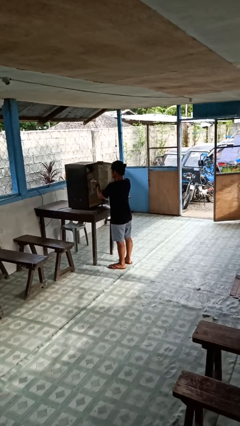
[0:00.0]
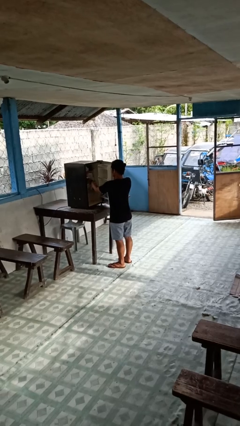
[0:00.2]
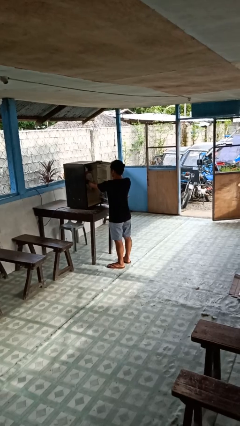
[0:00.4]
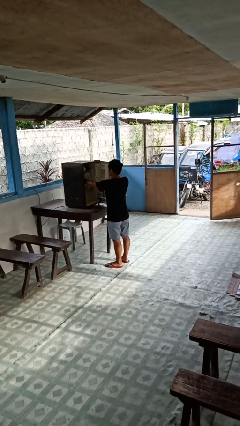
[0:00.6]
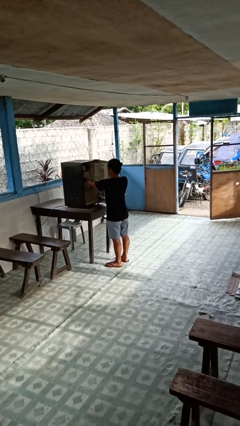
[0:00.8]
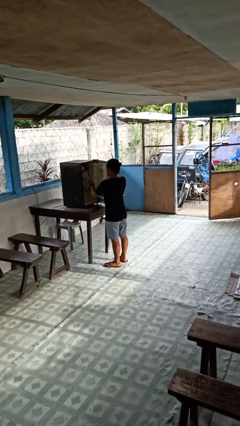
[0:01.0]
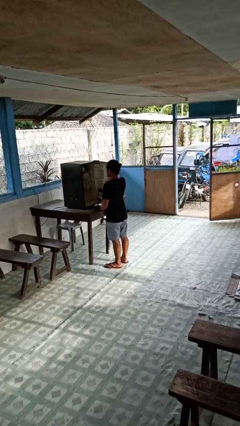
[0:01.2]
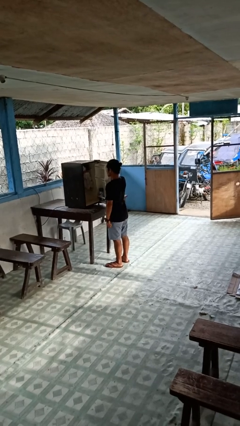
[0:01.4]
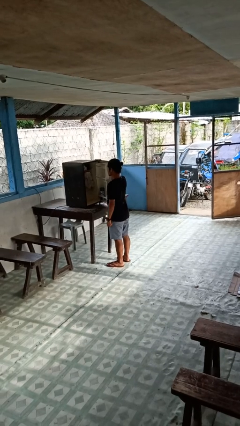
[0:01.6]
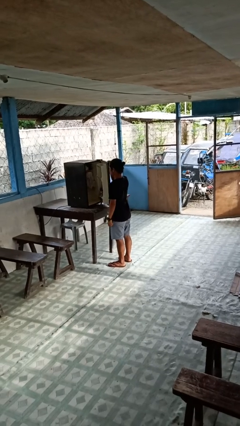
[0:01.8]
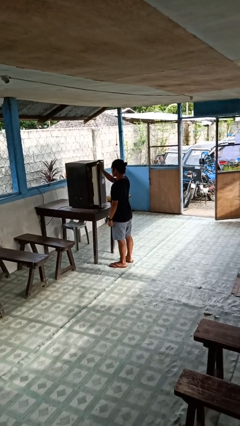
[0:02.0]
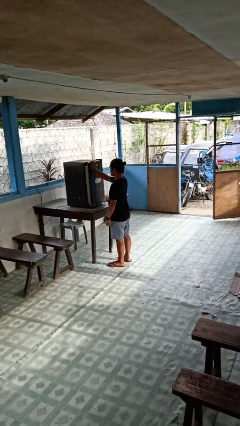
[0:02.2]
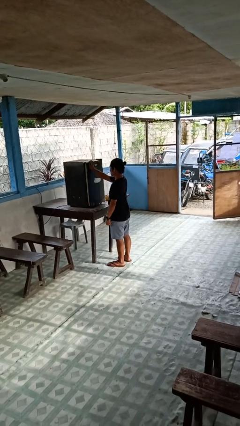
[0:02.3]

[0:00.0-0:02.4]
person puts object into refrigerator

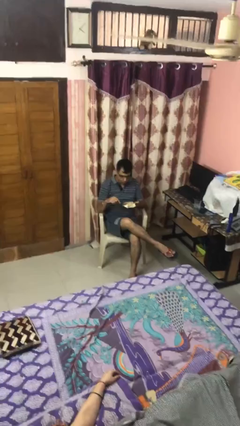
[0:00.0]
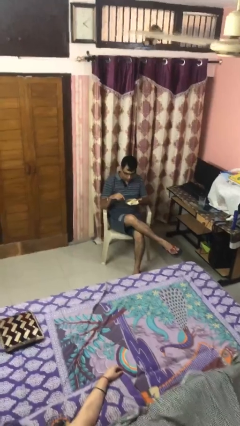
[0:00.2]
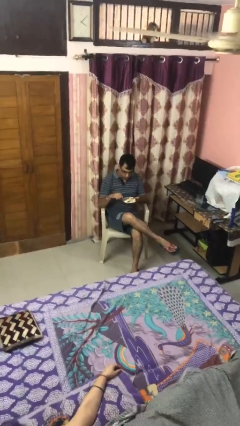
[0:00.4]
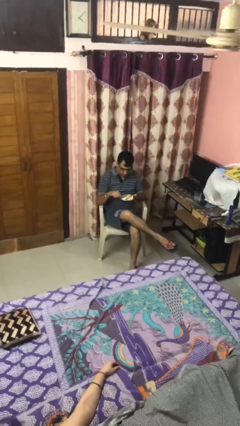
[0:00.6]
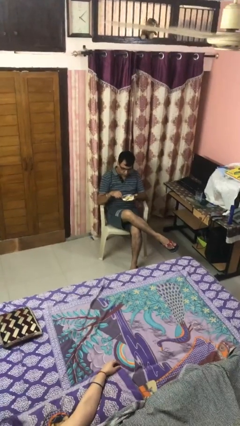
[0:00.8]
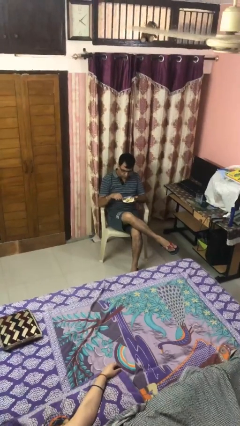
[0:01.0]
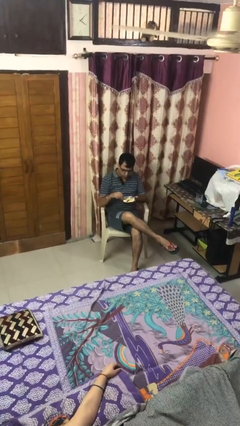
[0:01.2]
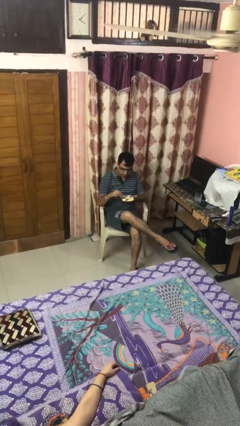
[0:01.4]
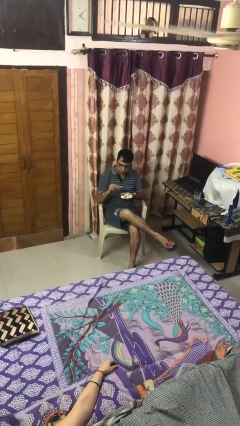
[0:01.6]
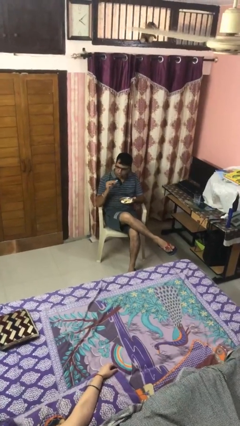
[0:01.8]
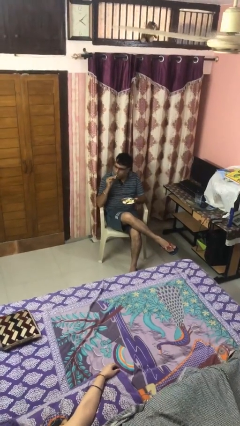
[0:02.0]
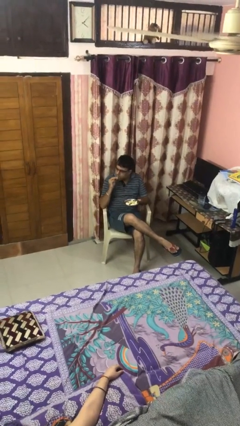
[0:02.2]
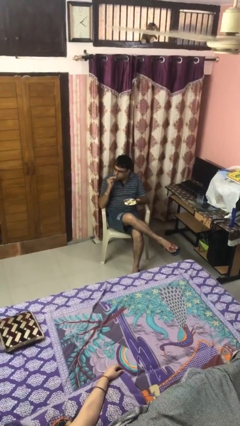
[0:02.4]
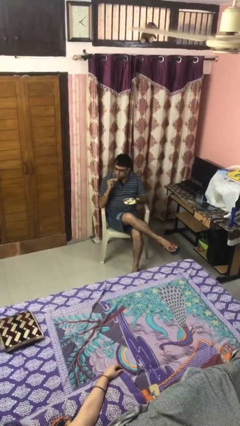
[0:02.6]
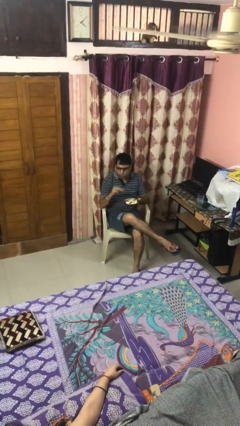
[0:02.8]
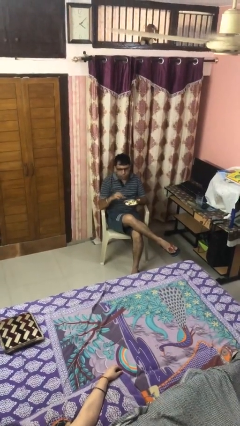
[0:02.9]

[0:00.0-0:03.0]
person eats with hands

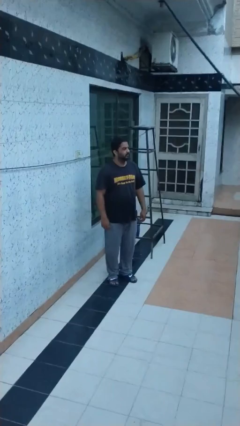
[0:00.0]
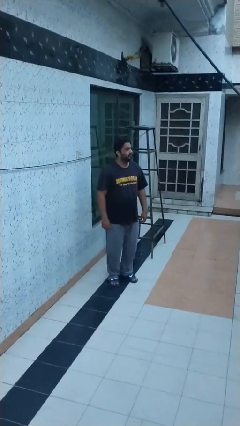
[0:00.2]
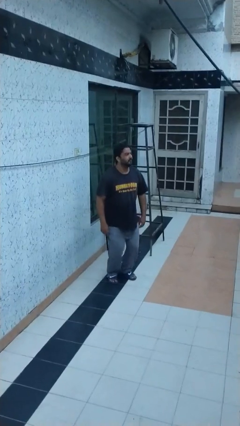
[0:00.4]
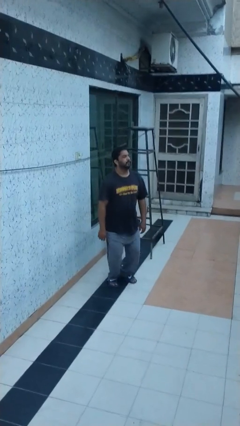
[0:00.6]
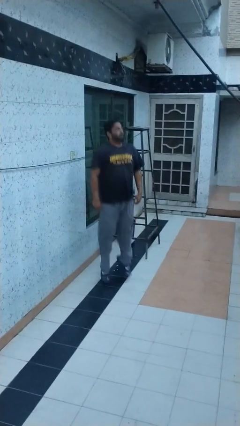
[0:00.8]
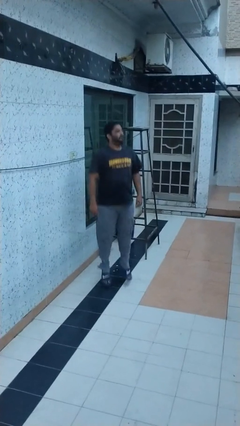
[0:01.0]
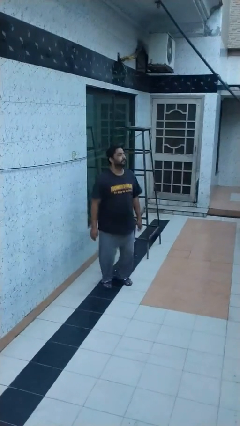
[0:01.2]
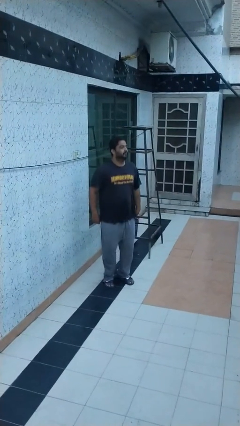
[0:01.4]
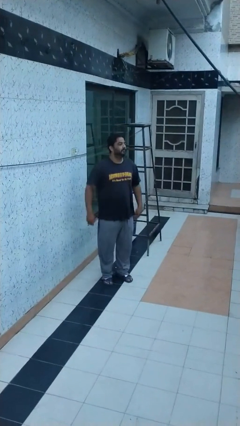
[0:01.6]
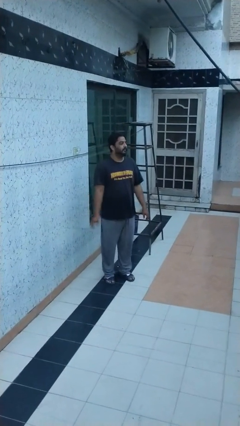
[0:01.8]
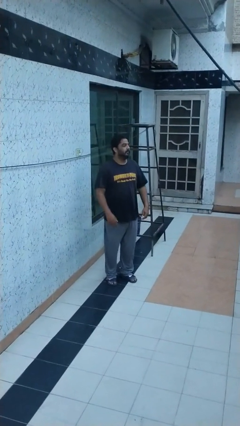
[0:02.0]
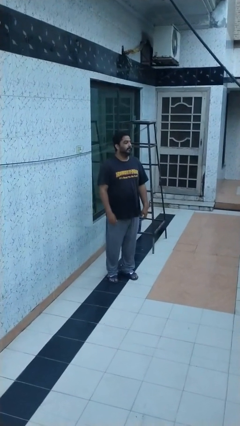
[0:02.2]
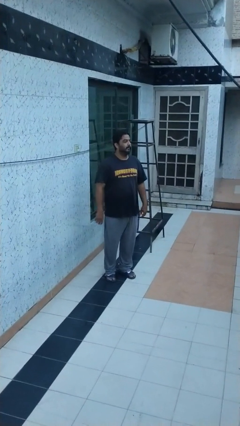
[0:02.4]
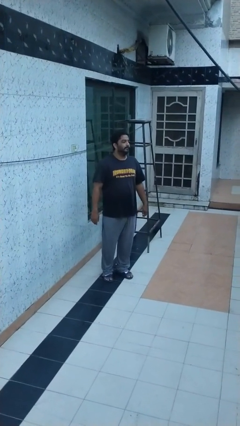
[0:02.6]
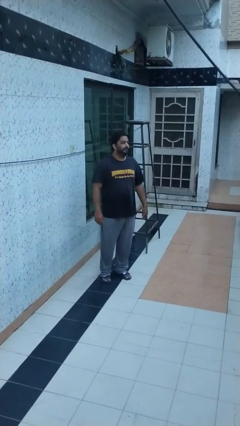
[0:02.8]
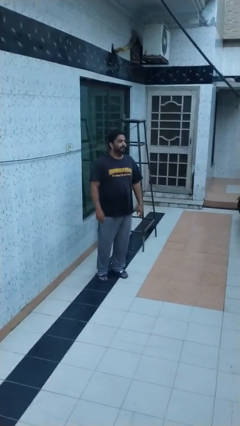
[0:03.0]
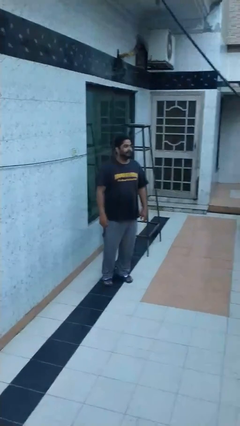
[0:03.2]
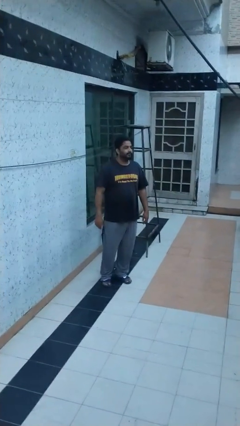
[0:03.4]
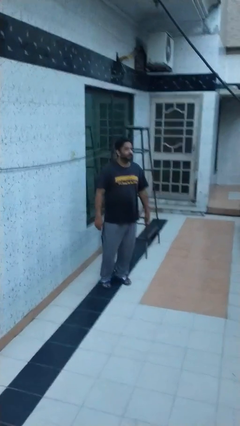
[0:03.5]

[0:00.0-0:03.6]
person jumps

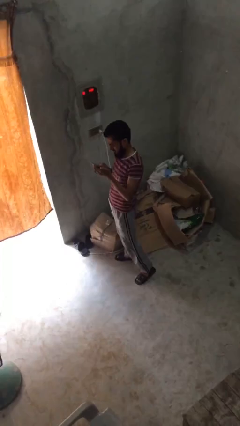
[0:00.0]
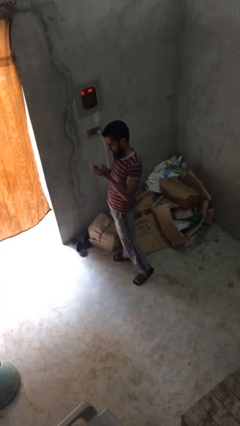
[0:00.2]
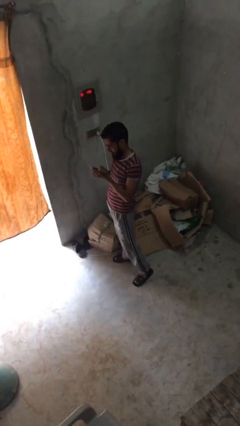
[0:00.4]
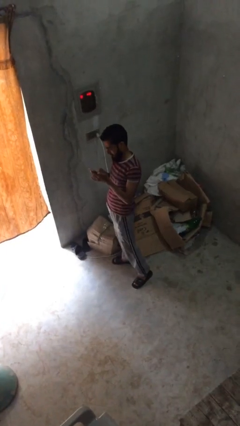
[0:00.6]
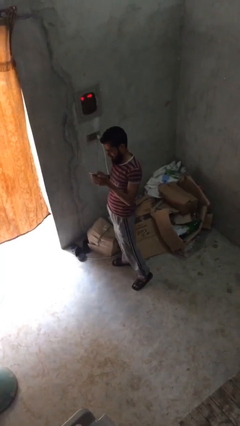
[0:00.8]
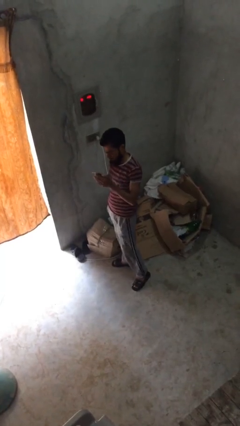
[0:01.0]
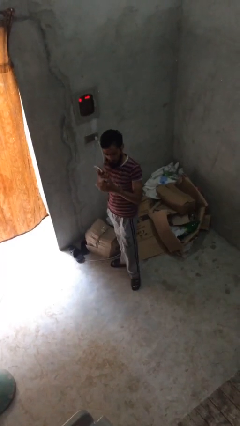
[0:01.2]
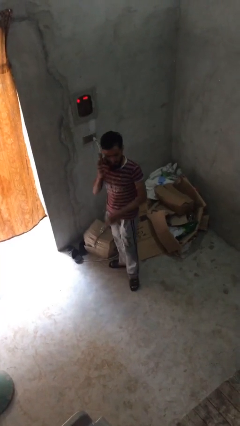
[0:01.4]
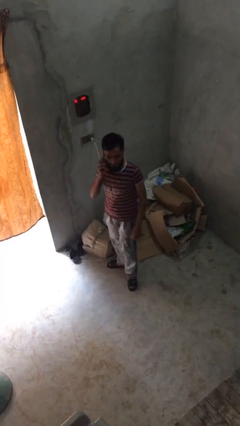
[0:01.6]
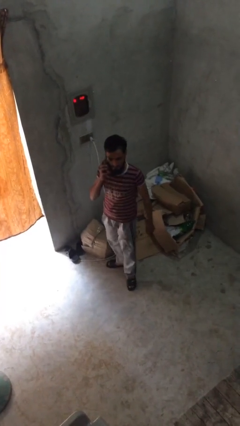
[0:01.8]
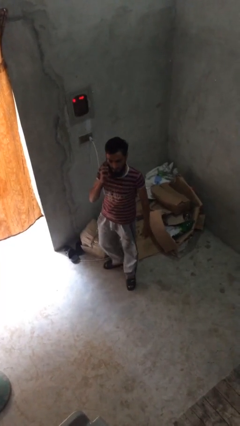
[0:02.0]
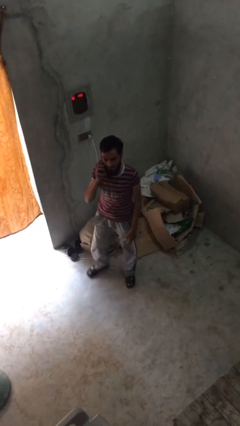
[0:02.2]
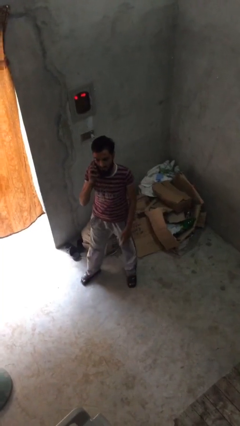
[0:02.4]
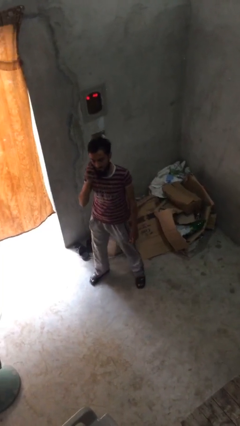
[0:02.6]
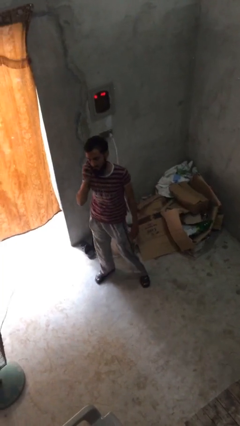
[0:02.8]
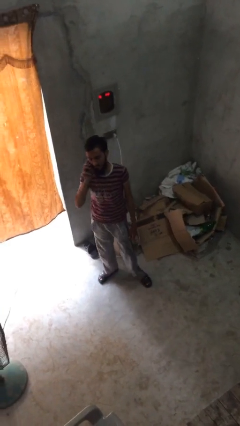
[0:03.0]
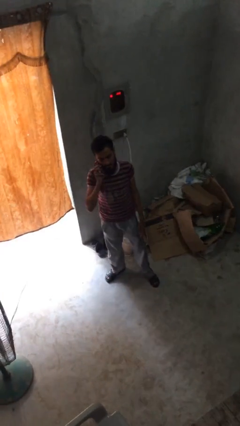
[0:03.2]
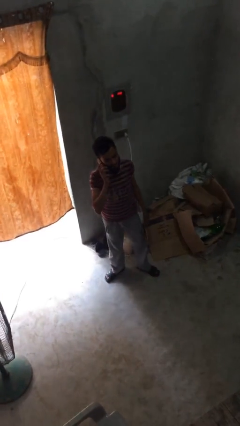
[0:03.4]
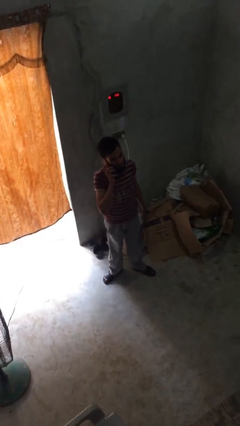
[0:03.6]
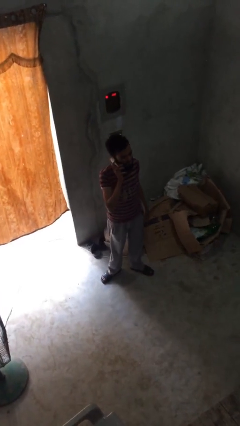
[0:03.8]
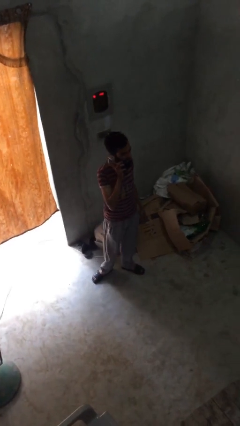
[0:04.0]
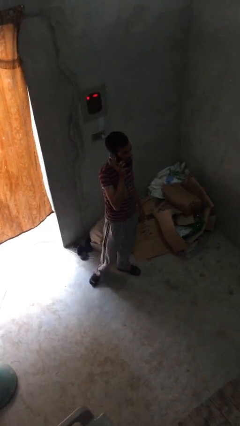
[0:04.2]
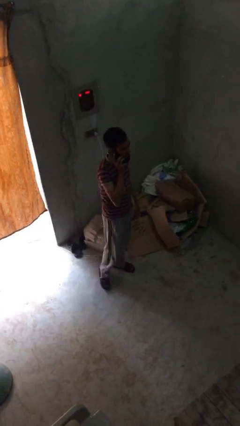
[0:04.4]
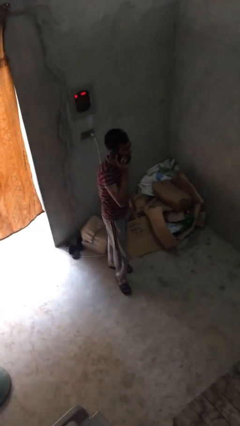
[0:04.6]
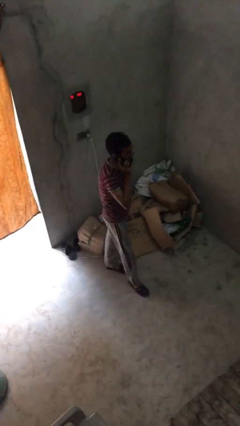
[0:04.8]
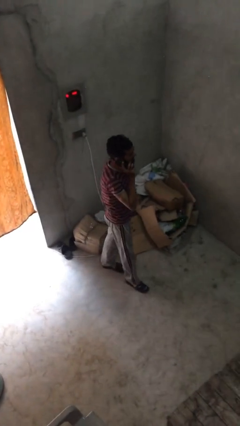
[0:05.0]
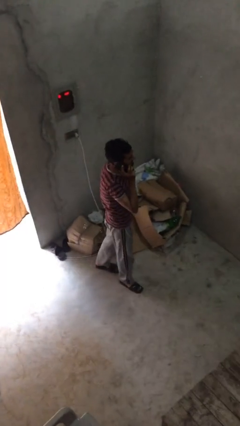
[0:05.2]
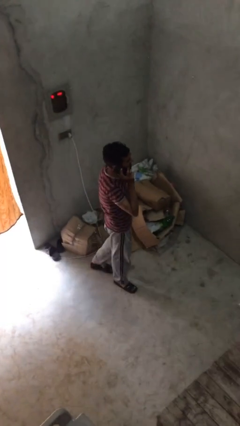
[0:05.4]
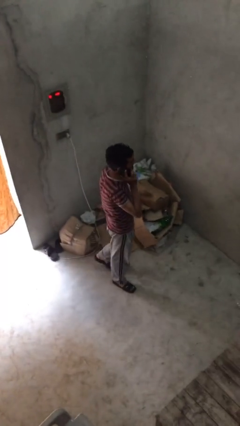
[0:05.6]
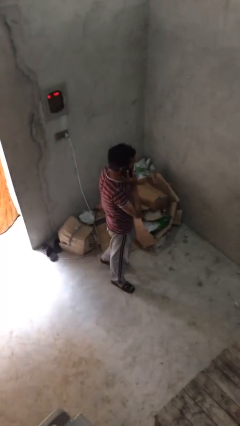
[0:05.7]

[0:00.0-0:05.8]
person talks on phone

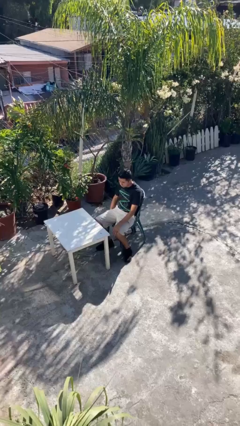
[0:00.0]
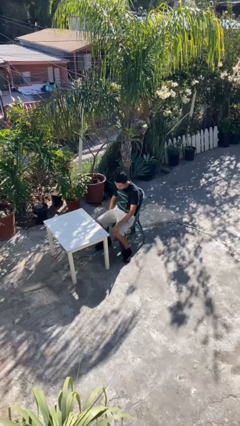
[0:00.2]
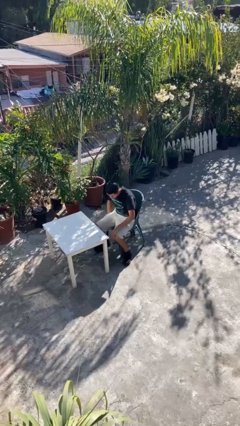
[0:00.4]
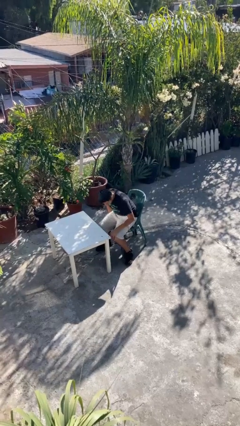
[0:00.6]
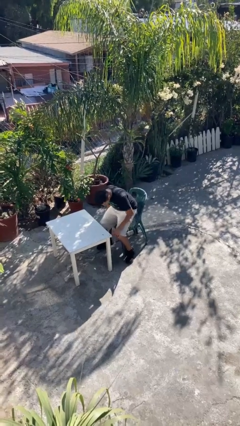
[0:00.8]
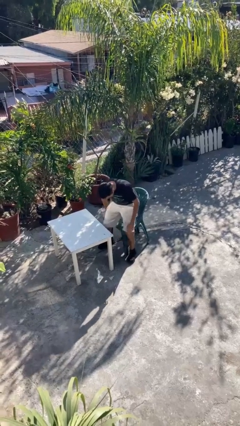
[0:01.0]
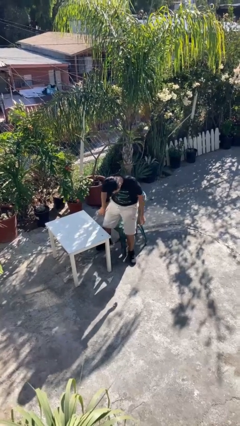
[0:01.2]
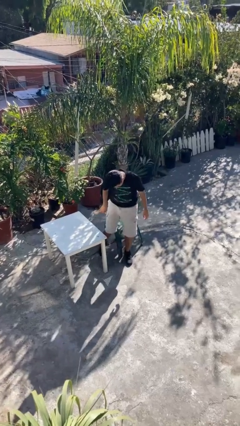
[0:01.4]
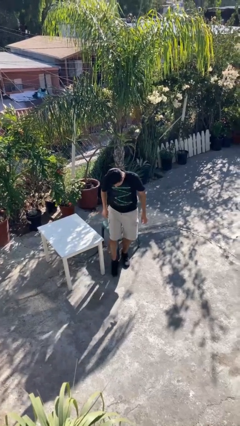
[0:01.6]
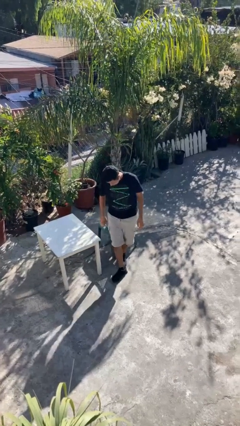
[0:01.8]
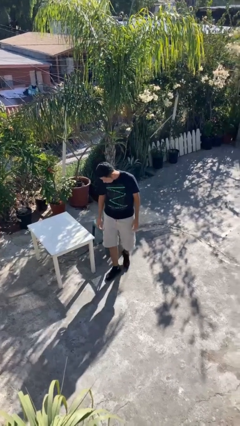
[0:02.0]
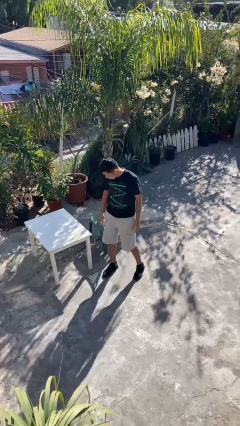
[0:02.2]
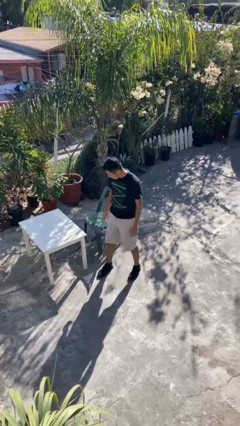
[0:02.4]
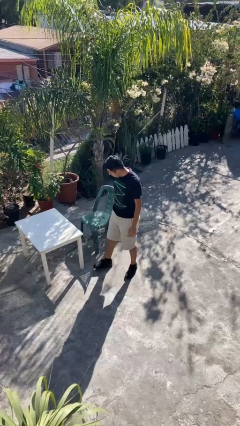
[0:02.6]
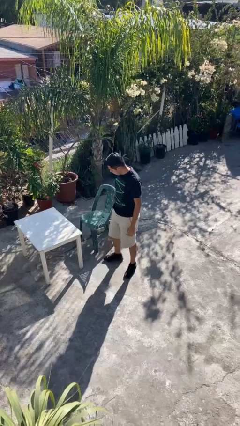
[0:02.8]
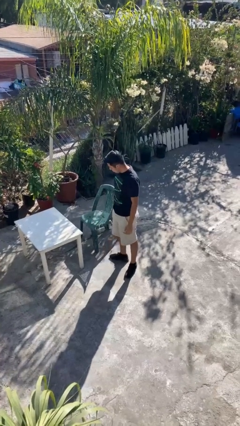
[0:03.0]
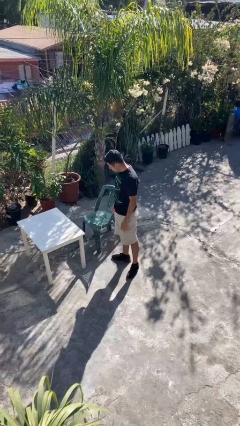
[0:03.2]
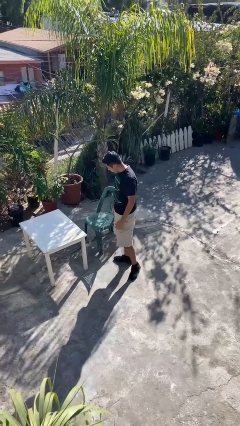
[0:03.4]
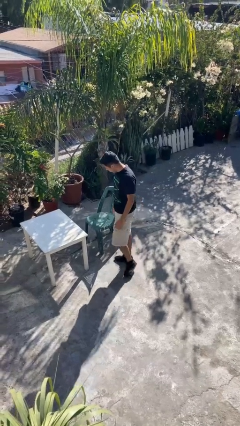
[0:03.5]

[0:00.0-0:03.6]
person stands up
